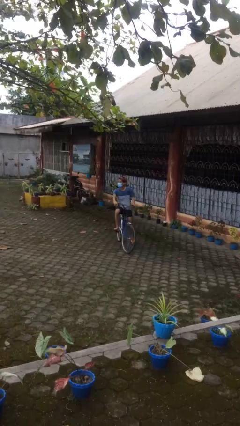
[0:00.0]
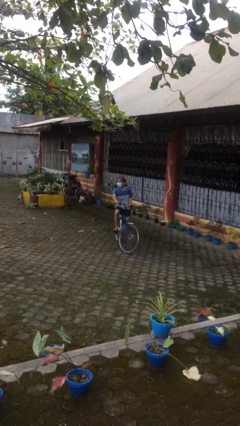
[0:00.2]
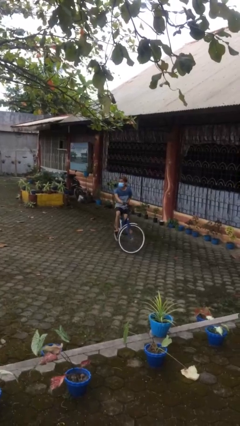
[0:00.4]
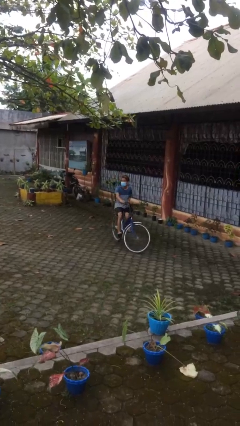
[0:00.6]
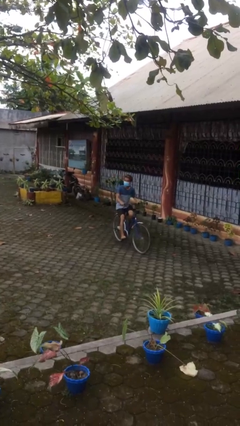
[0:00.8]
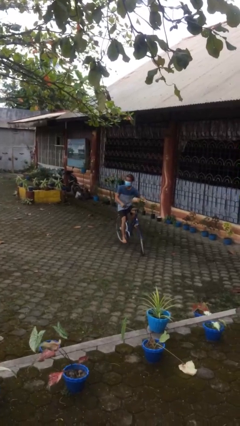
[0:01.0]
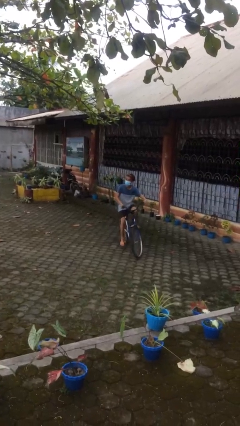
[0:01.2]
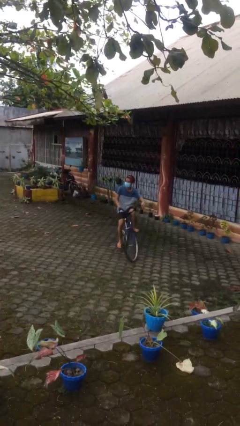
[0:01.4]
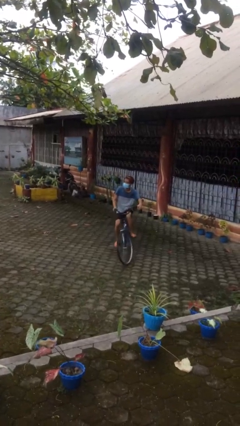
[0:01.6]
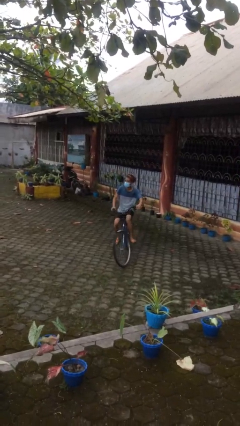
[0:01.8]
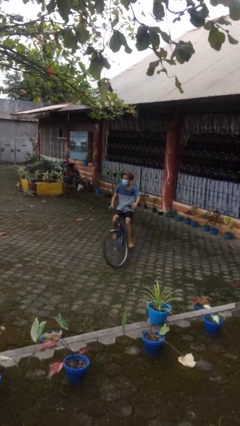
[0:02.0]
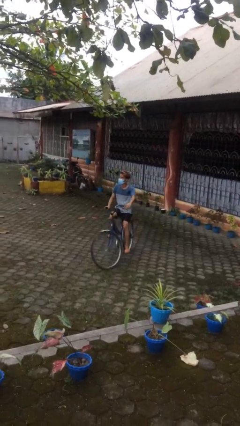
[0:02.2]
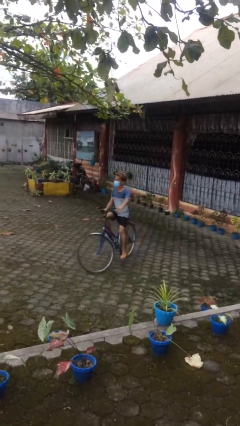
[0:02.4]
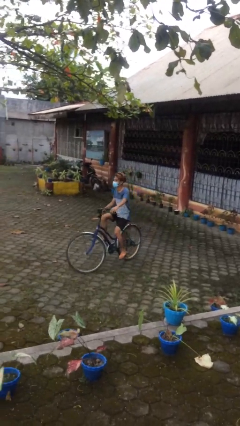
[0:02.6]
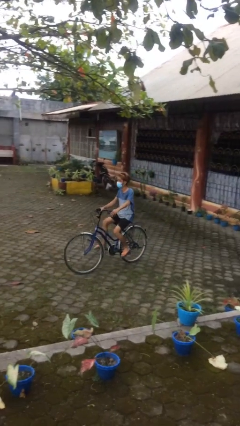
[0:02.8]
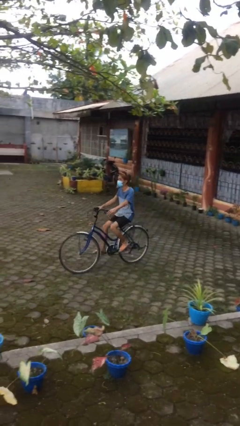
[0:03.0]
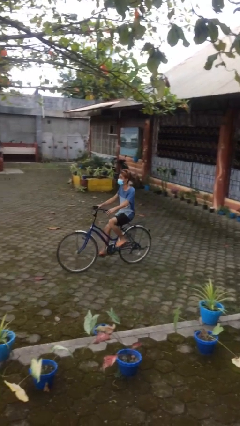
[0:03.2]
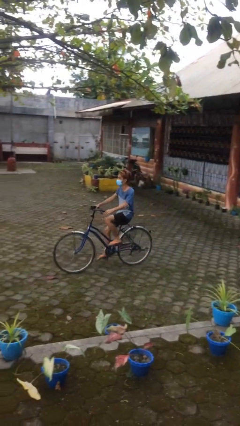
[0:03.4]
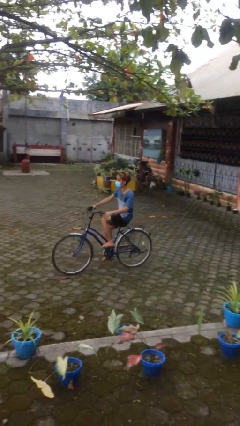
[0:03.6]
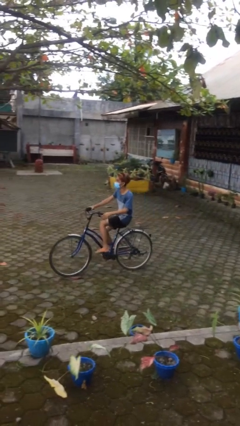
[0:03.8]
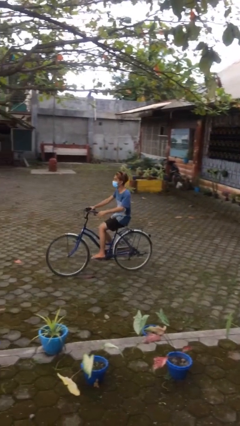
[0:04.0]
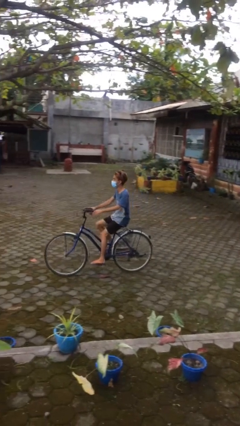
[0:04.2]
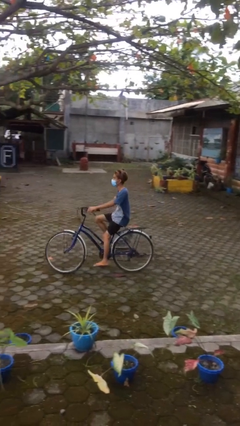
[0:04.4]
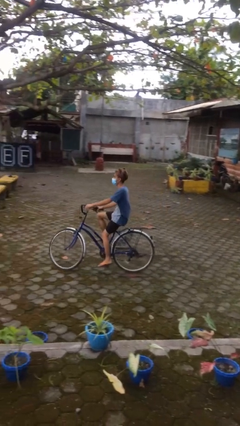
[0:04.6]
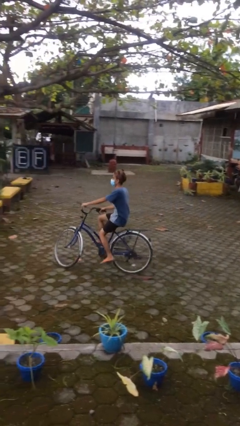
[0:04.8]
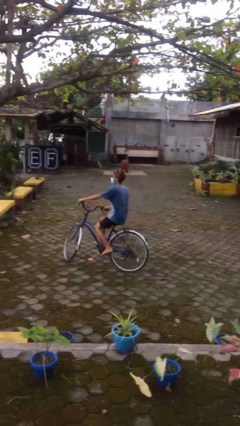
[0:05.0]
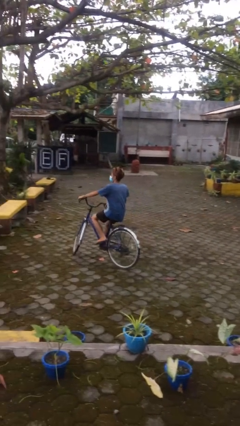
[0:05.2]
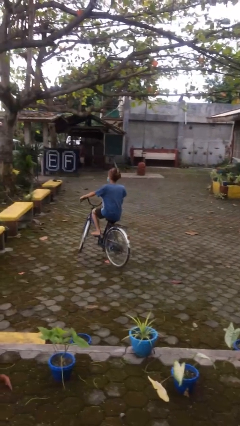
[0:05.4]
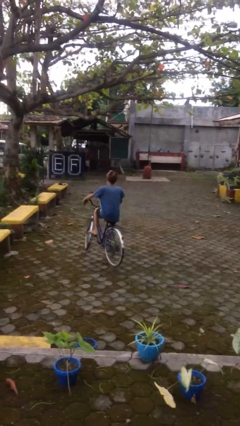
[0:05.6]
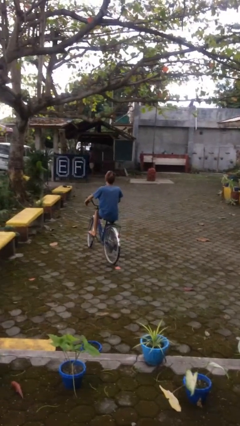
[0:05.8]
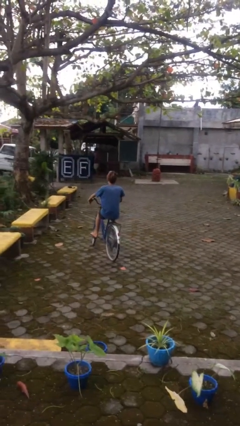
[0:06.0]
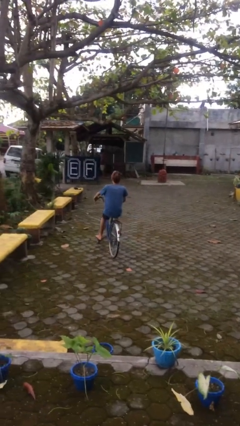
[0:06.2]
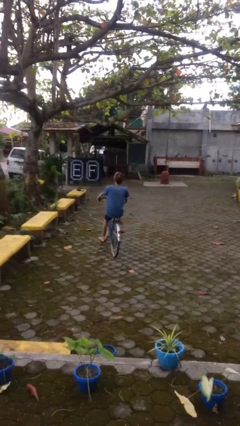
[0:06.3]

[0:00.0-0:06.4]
person rides bicycle

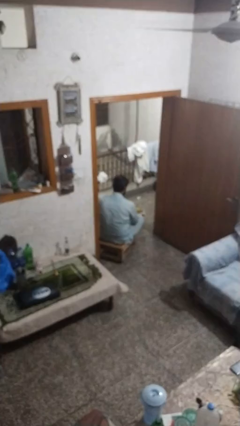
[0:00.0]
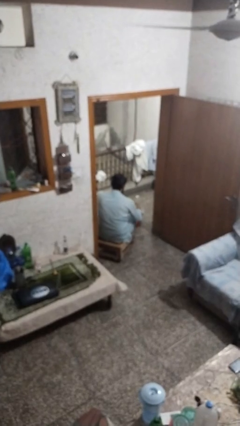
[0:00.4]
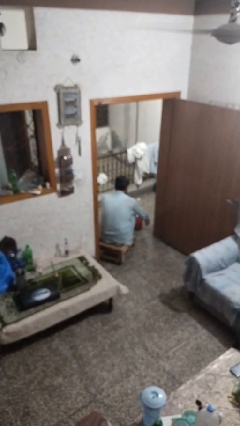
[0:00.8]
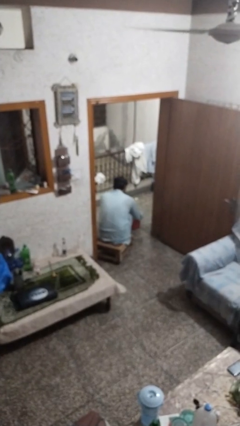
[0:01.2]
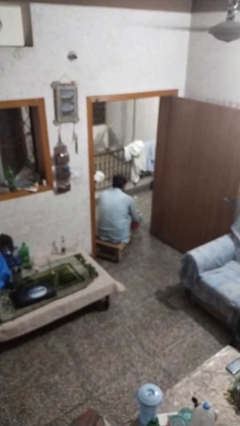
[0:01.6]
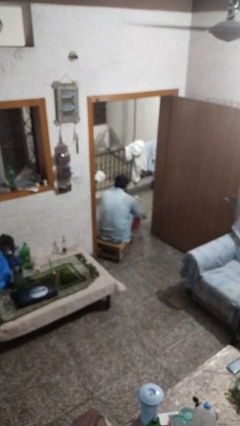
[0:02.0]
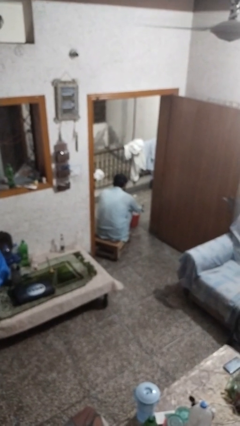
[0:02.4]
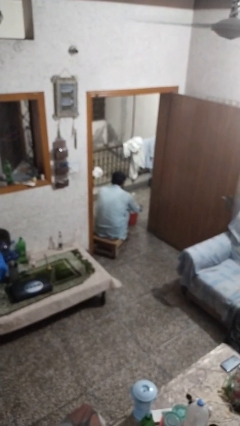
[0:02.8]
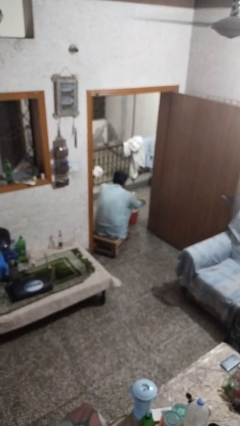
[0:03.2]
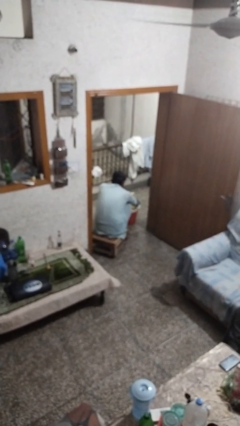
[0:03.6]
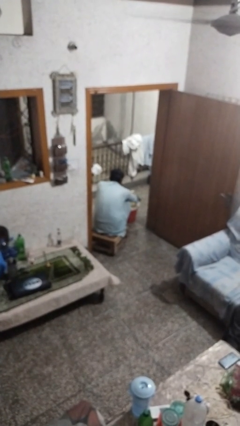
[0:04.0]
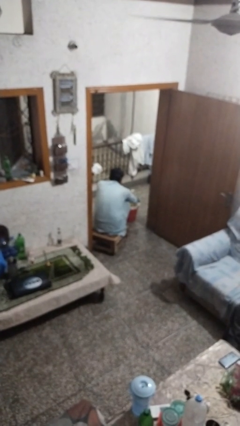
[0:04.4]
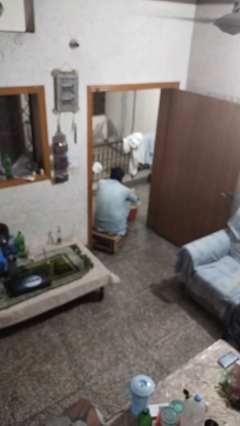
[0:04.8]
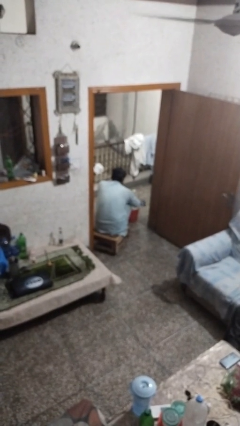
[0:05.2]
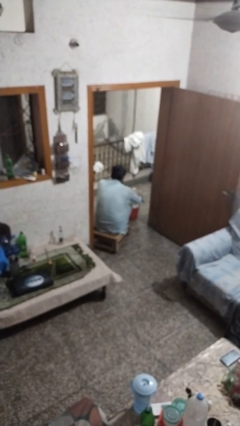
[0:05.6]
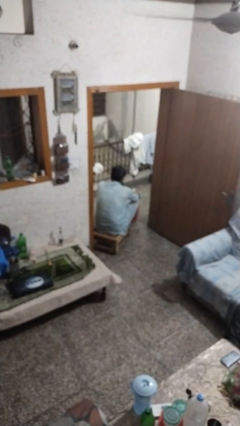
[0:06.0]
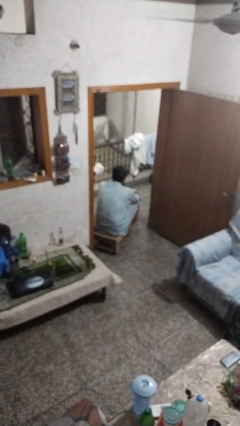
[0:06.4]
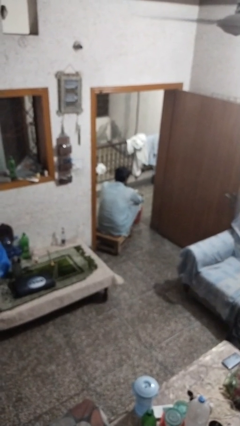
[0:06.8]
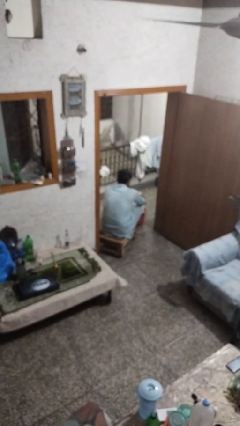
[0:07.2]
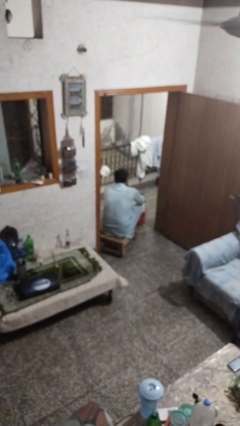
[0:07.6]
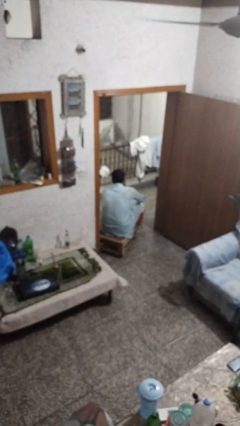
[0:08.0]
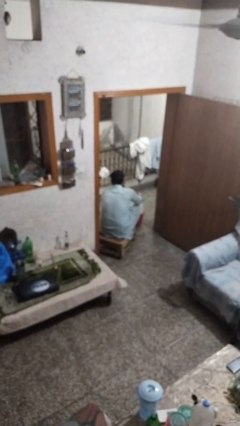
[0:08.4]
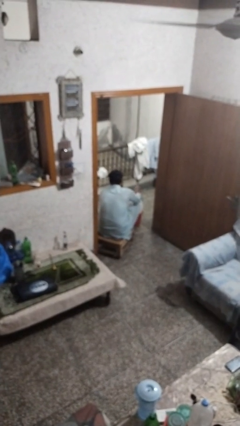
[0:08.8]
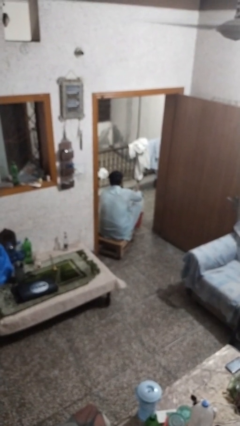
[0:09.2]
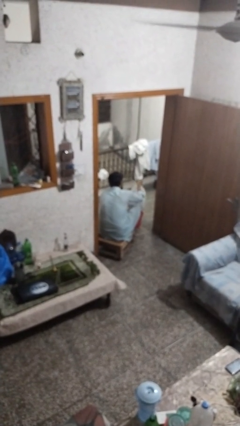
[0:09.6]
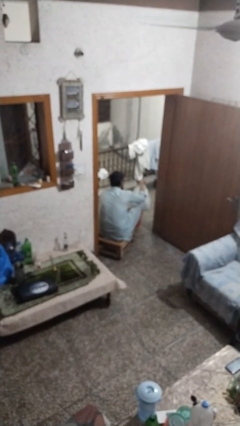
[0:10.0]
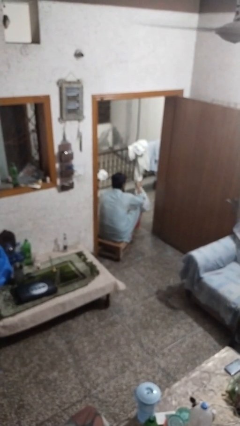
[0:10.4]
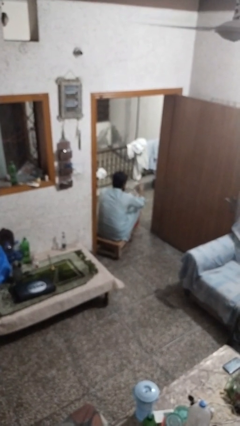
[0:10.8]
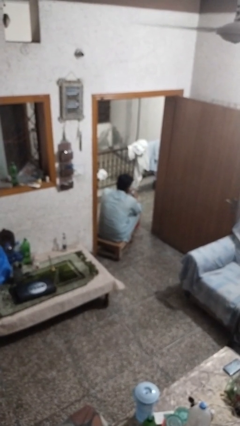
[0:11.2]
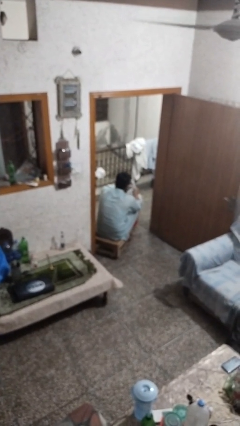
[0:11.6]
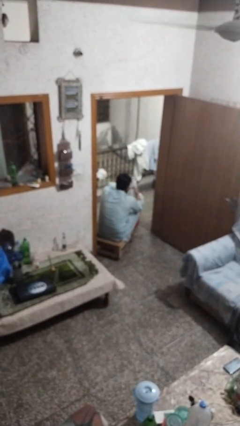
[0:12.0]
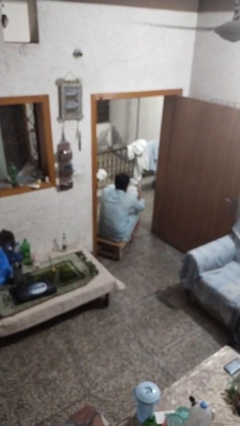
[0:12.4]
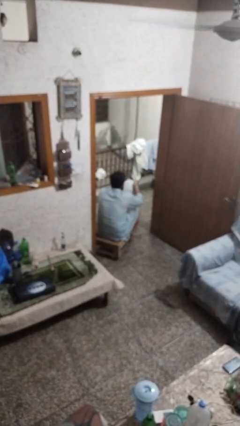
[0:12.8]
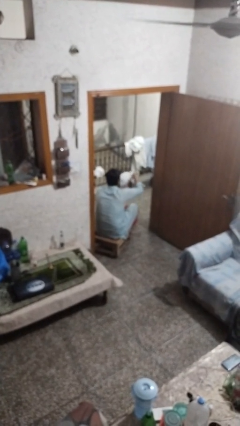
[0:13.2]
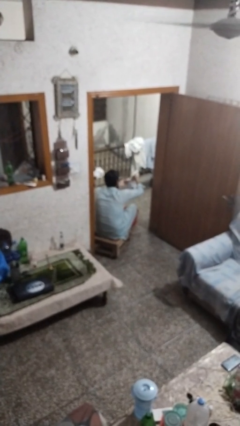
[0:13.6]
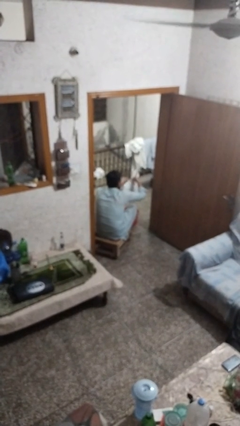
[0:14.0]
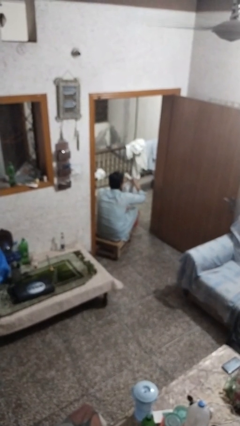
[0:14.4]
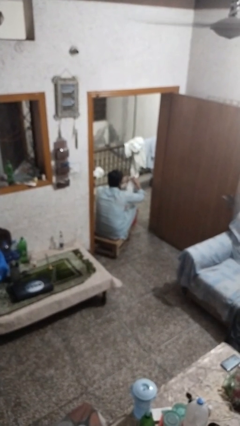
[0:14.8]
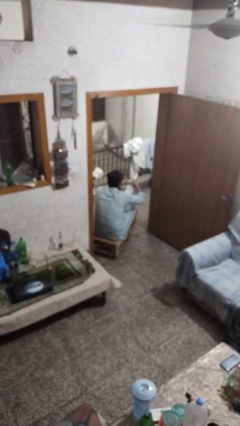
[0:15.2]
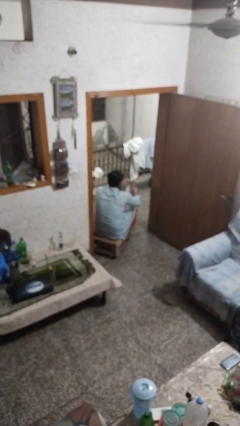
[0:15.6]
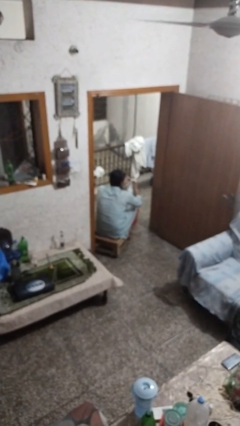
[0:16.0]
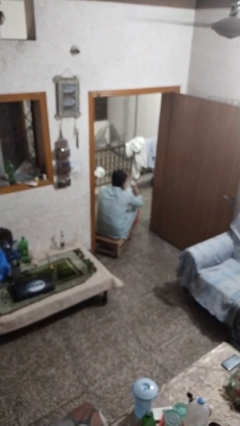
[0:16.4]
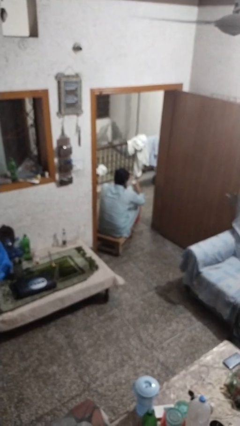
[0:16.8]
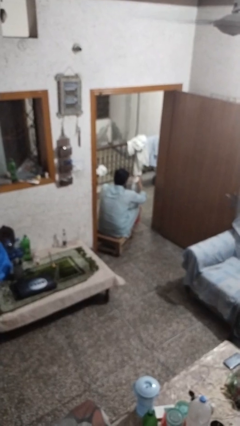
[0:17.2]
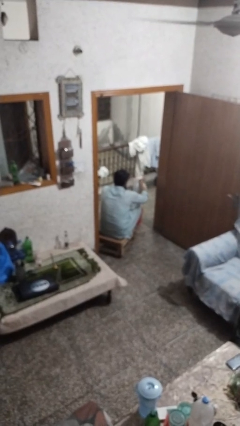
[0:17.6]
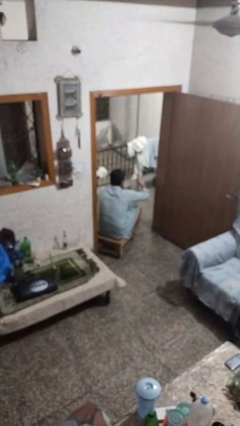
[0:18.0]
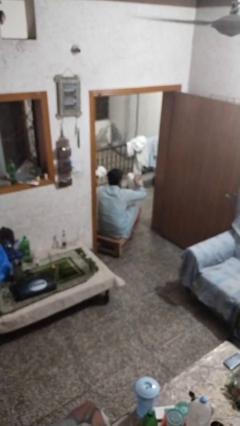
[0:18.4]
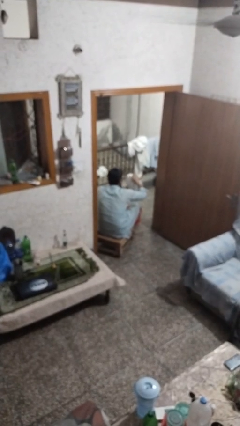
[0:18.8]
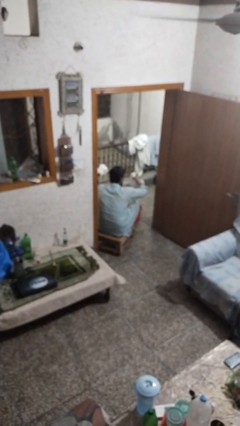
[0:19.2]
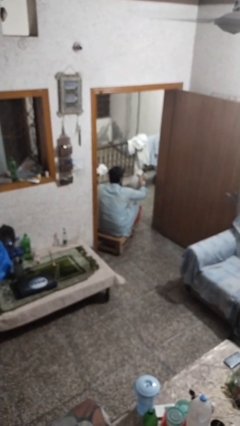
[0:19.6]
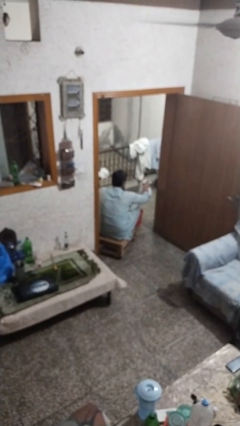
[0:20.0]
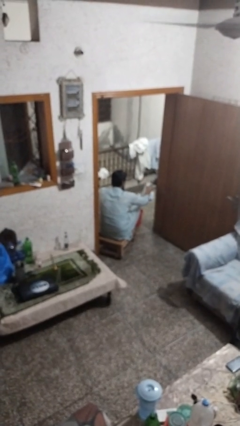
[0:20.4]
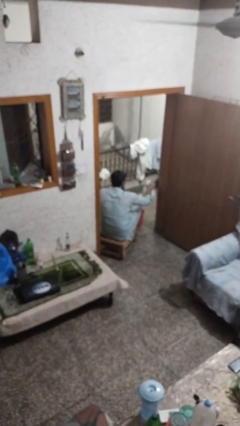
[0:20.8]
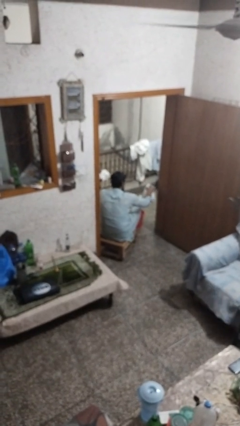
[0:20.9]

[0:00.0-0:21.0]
person removes trashbag from trashcan

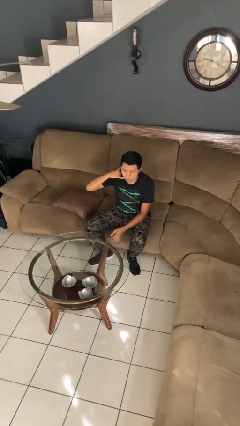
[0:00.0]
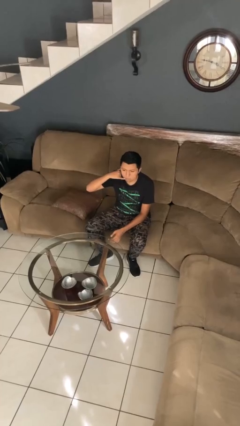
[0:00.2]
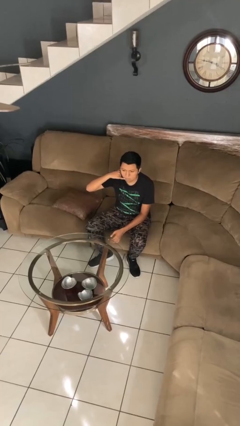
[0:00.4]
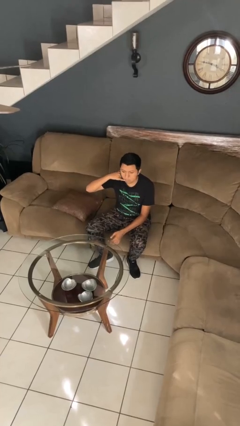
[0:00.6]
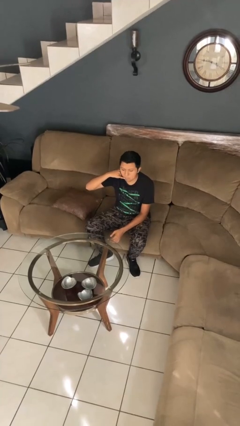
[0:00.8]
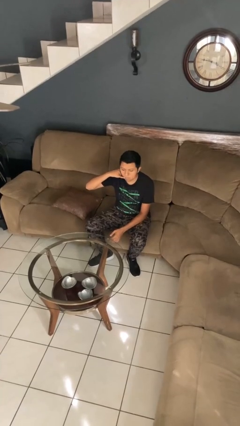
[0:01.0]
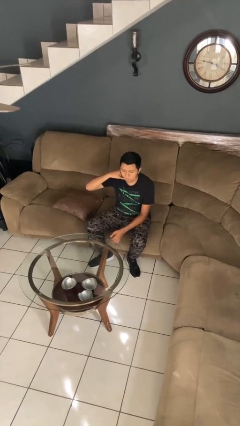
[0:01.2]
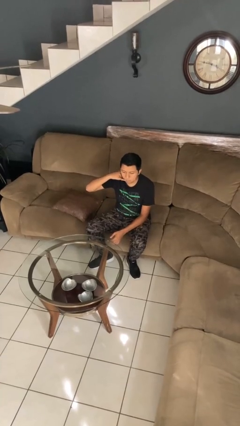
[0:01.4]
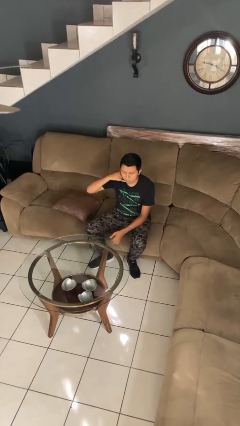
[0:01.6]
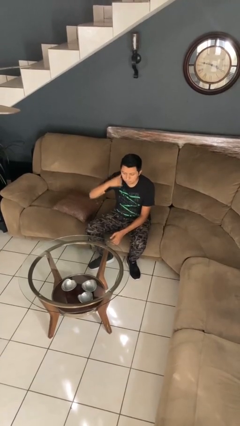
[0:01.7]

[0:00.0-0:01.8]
person gestures call me
